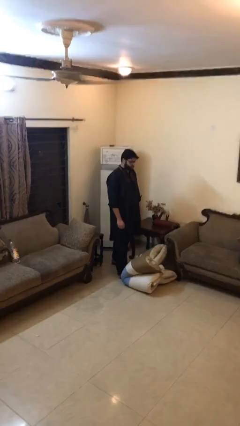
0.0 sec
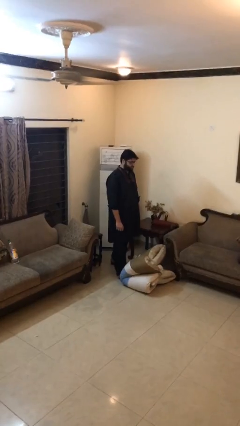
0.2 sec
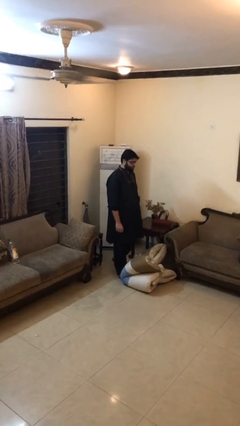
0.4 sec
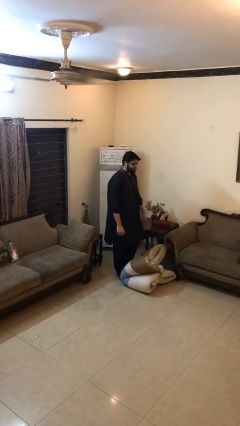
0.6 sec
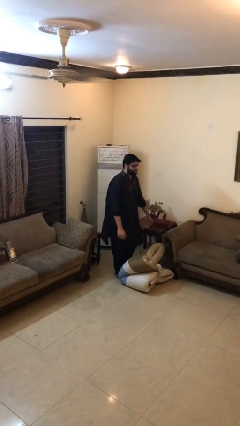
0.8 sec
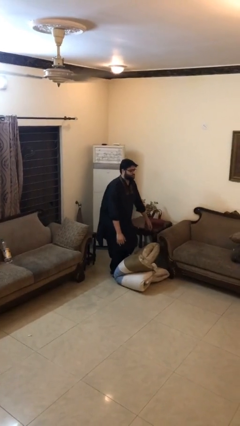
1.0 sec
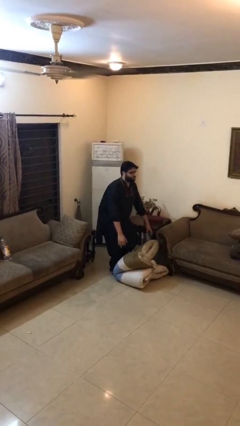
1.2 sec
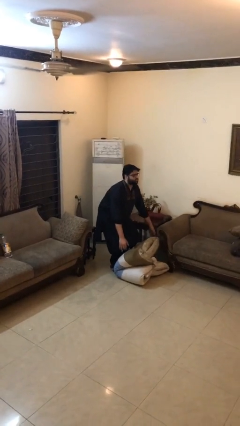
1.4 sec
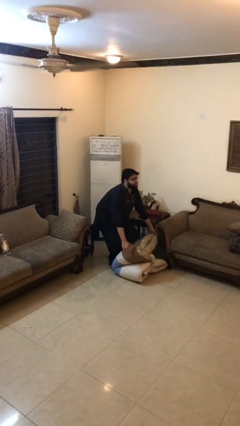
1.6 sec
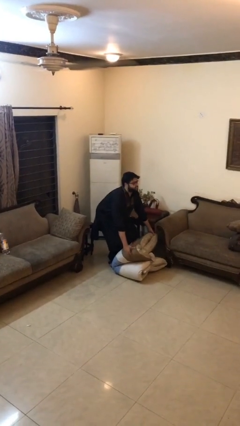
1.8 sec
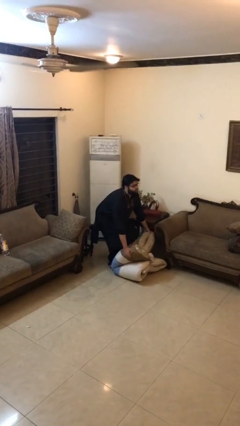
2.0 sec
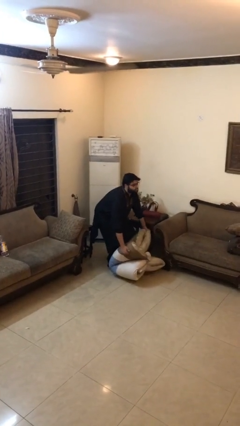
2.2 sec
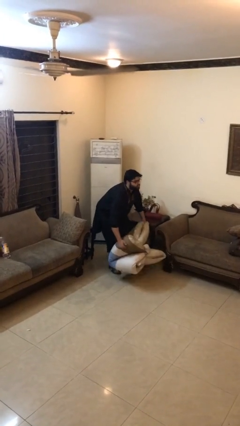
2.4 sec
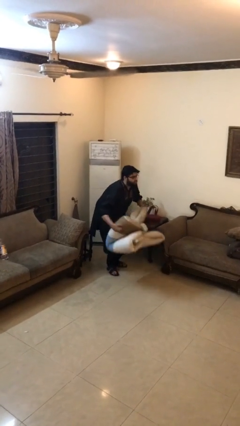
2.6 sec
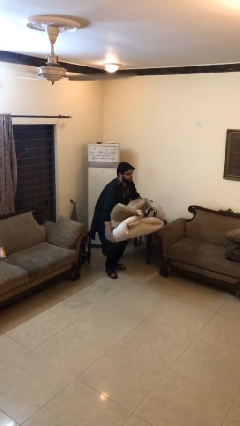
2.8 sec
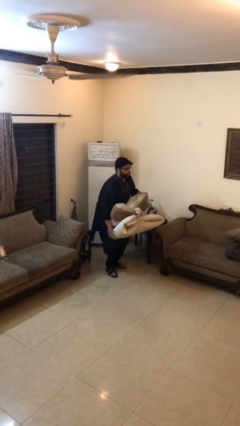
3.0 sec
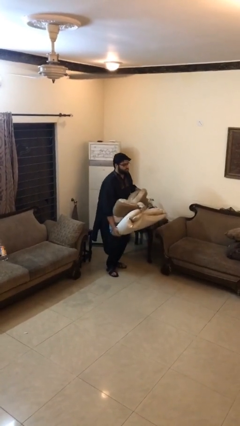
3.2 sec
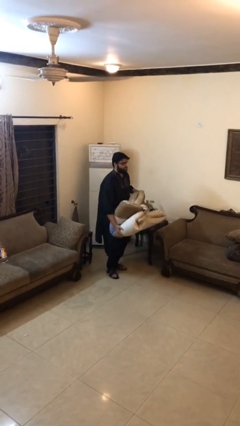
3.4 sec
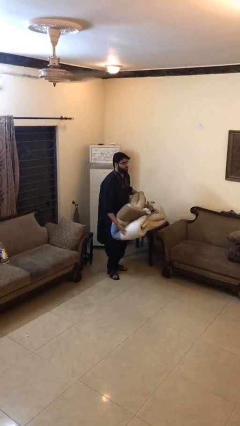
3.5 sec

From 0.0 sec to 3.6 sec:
person picks up object from floor

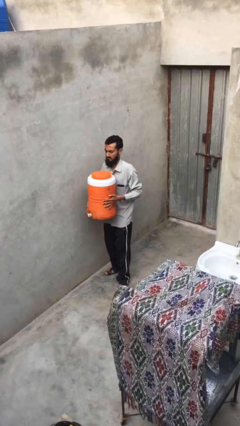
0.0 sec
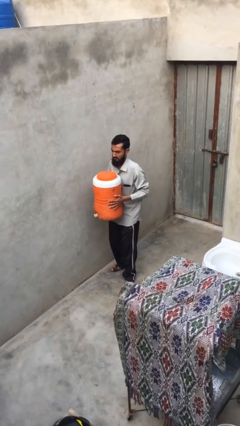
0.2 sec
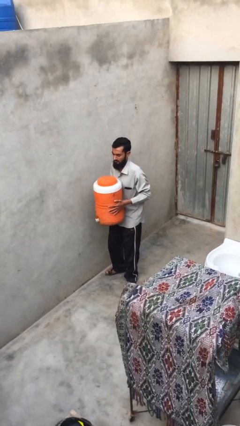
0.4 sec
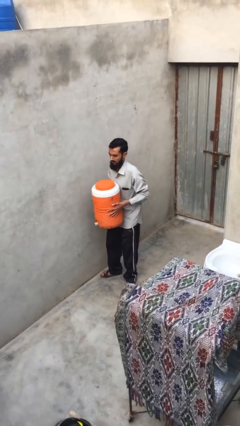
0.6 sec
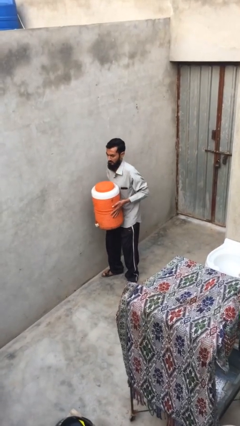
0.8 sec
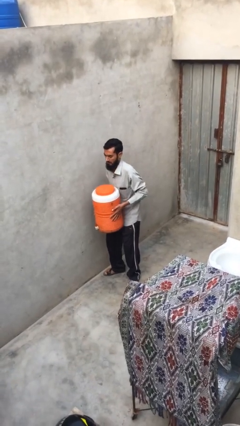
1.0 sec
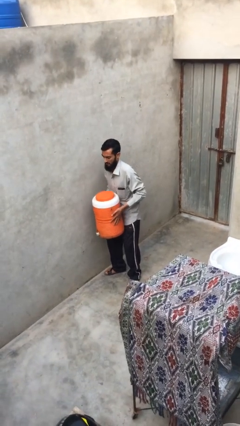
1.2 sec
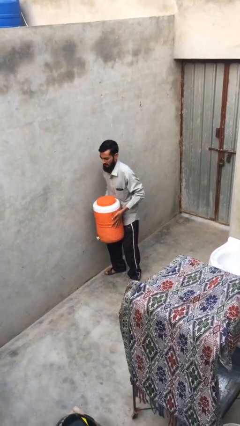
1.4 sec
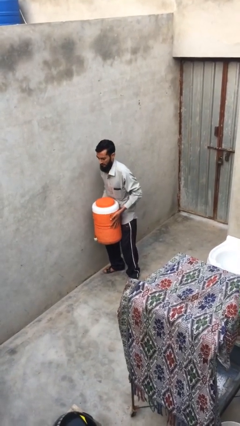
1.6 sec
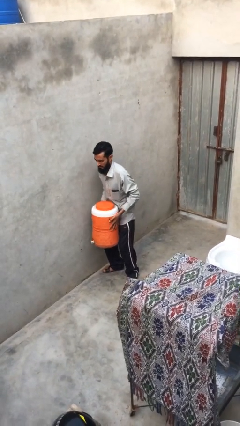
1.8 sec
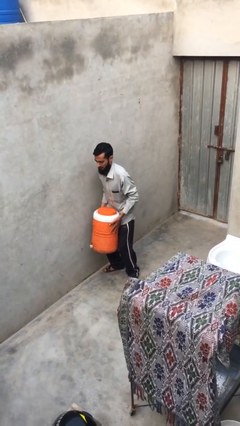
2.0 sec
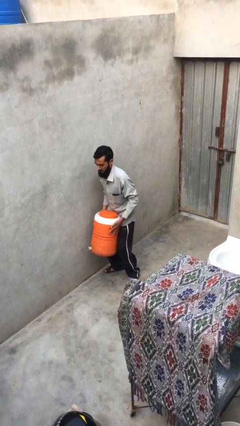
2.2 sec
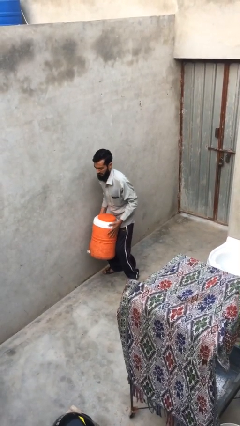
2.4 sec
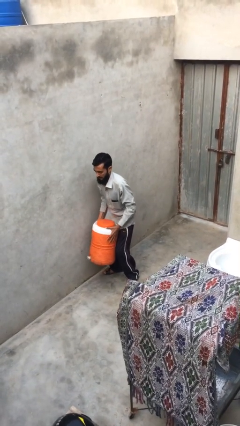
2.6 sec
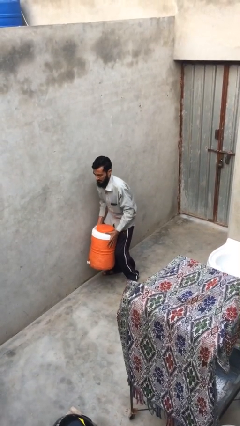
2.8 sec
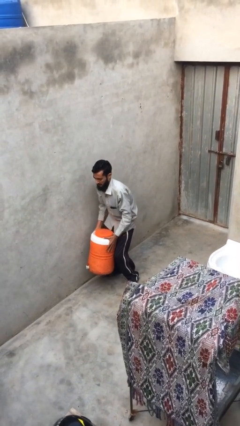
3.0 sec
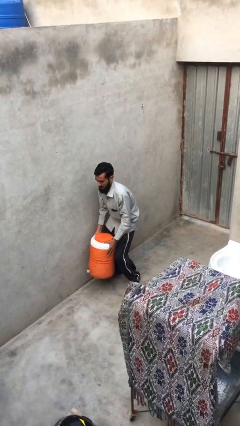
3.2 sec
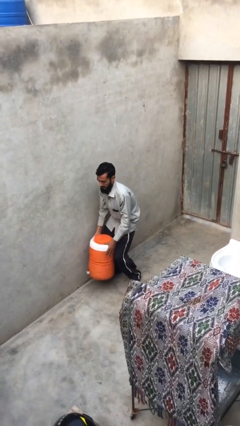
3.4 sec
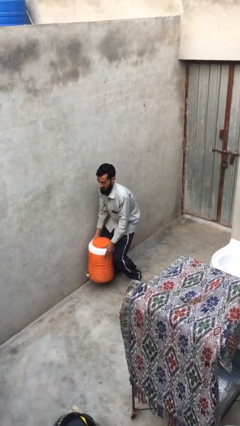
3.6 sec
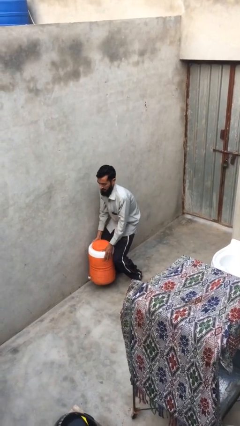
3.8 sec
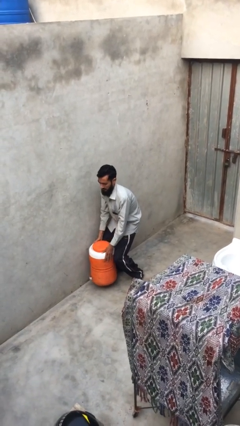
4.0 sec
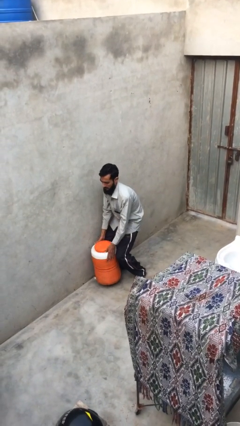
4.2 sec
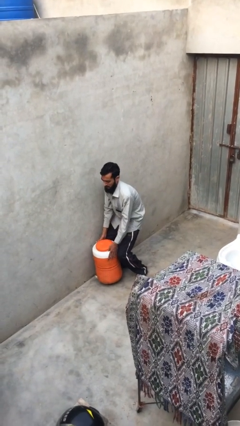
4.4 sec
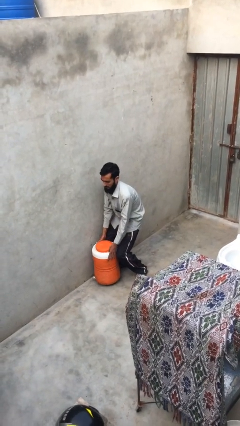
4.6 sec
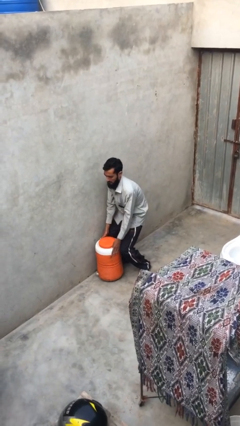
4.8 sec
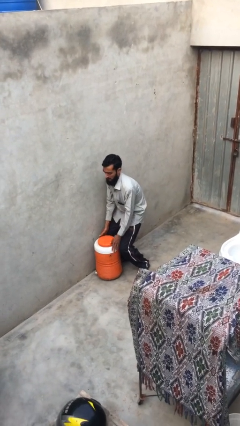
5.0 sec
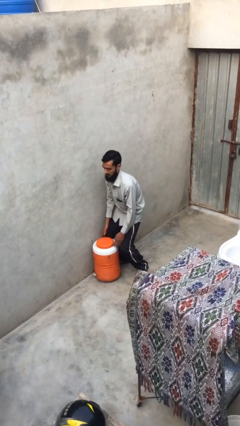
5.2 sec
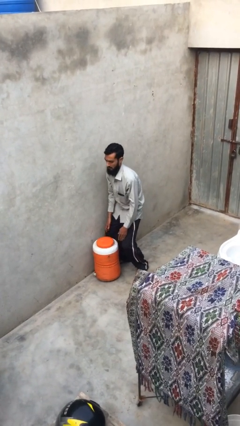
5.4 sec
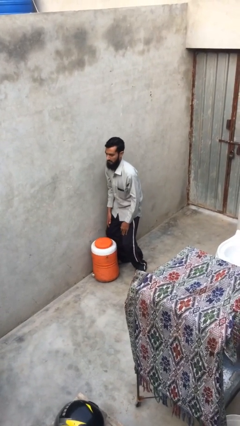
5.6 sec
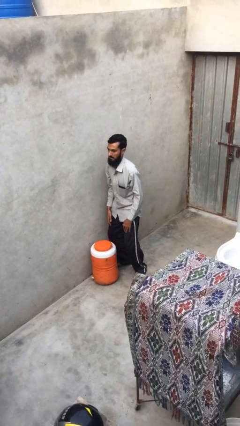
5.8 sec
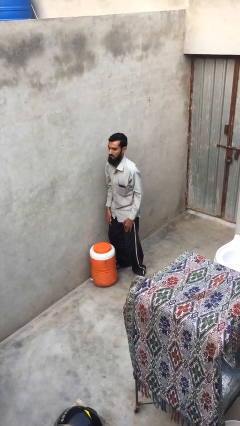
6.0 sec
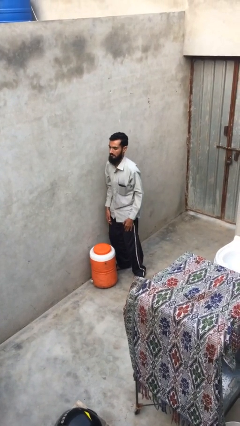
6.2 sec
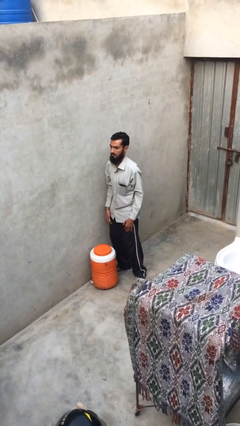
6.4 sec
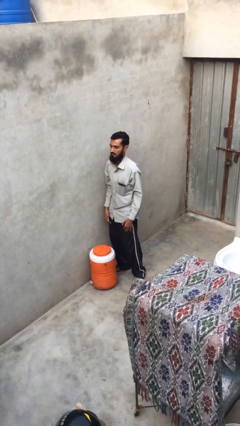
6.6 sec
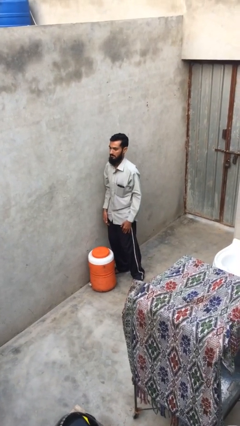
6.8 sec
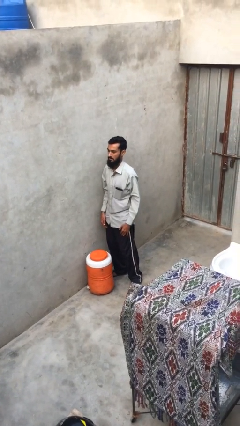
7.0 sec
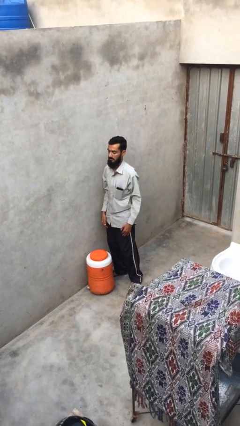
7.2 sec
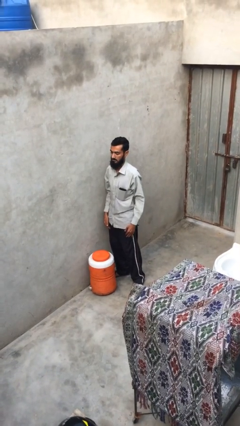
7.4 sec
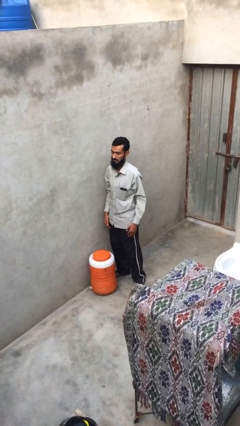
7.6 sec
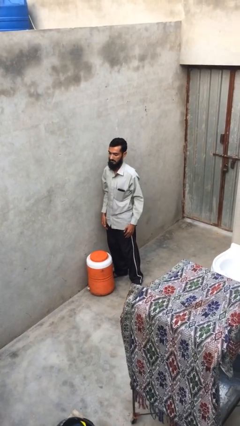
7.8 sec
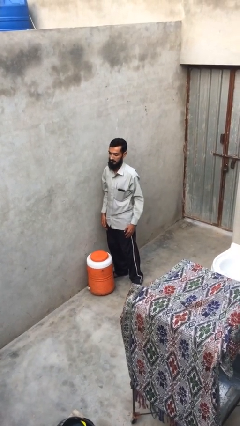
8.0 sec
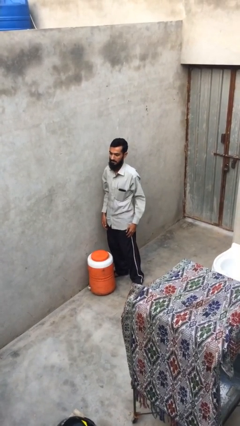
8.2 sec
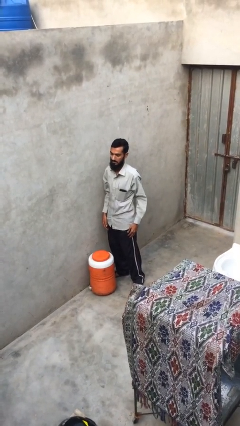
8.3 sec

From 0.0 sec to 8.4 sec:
person puts down object on floor

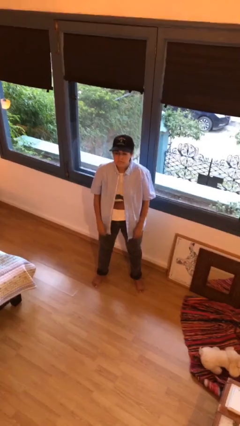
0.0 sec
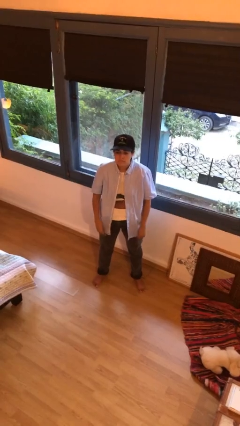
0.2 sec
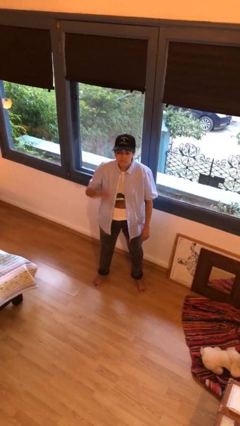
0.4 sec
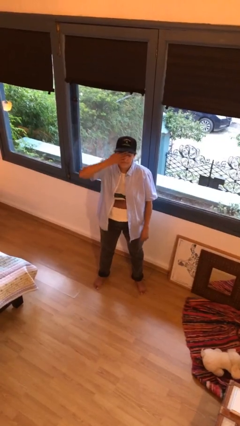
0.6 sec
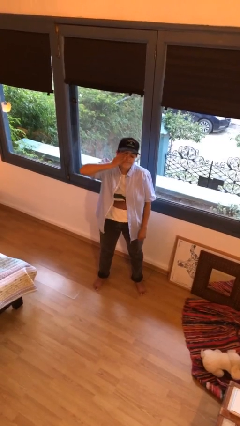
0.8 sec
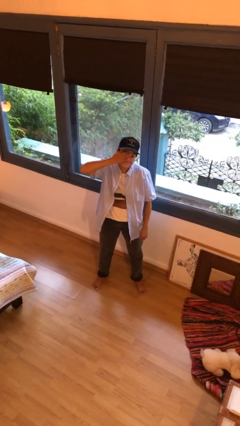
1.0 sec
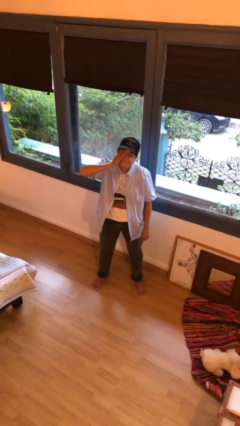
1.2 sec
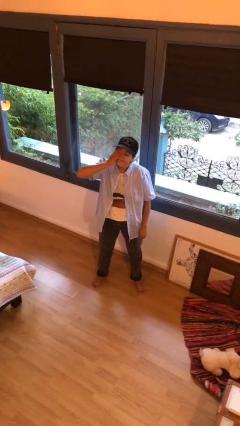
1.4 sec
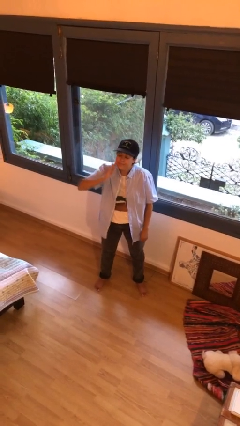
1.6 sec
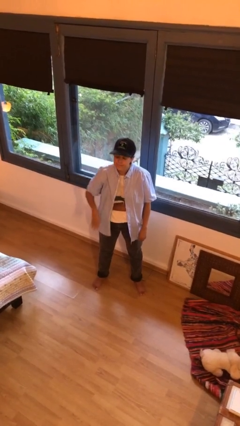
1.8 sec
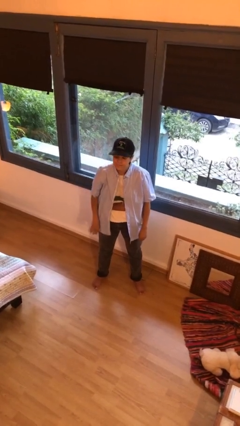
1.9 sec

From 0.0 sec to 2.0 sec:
person rubs eyes

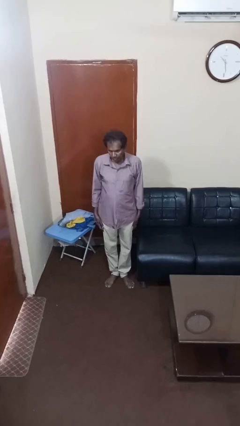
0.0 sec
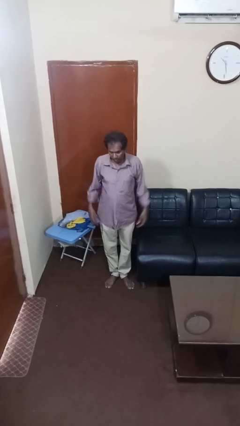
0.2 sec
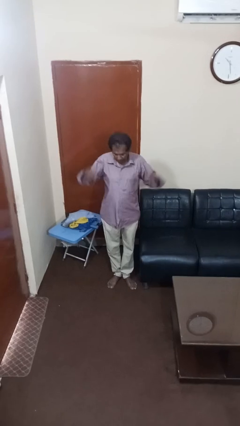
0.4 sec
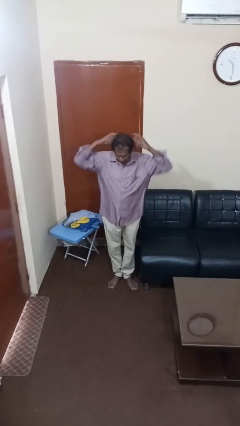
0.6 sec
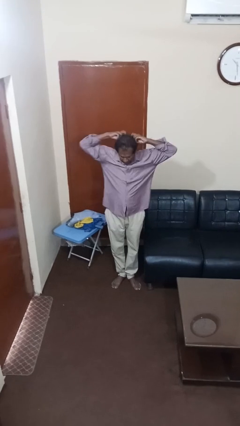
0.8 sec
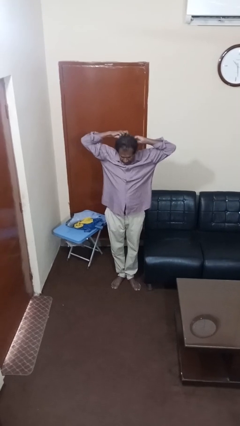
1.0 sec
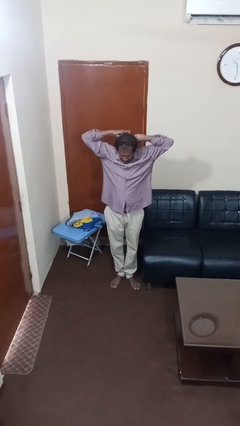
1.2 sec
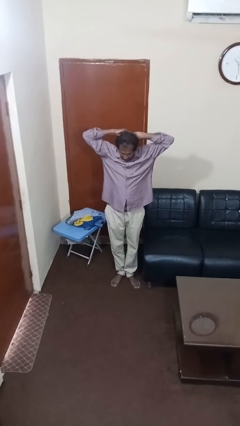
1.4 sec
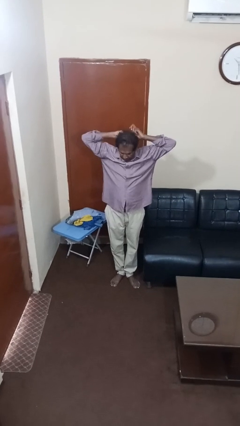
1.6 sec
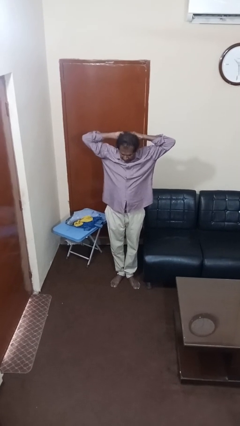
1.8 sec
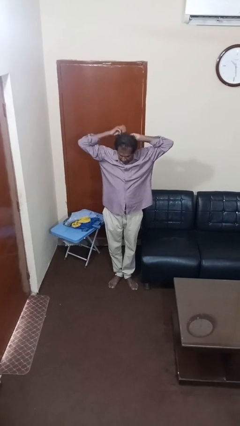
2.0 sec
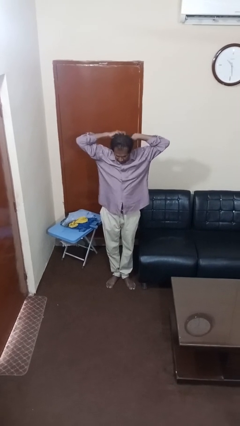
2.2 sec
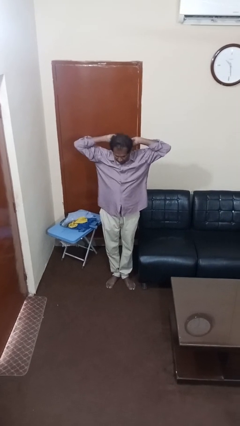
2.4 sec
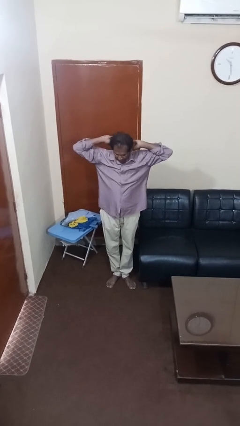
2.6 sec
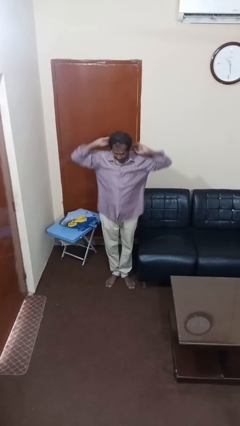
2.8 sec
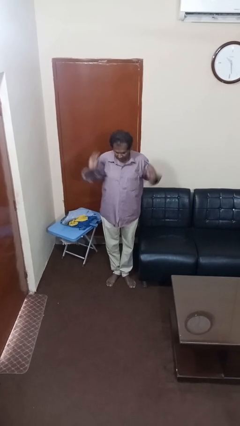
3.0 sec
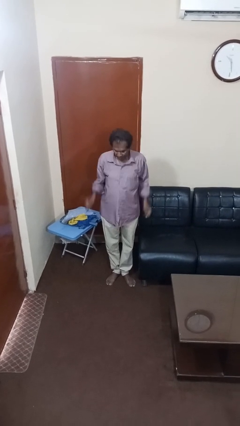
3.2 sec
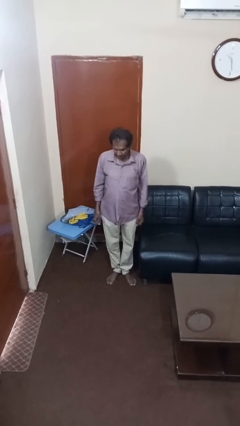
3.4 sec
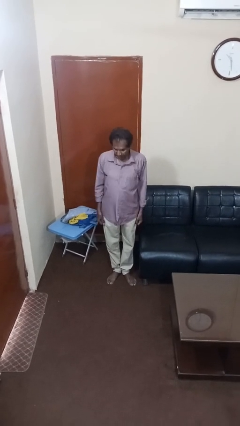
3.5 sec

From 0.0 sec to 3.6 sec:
person puts hair in ponytail
